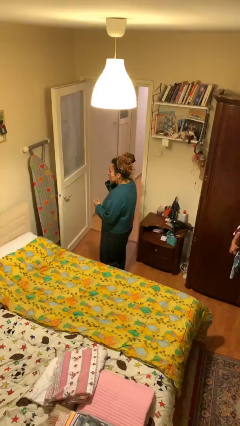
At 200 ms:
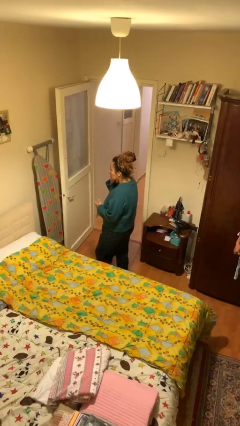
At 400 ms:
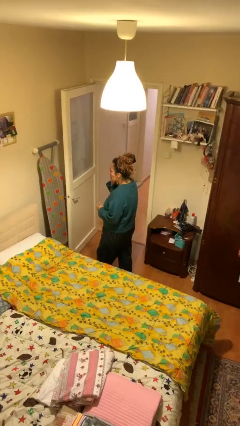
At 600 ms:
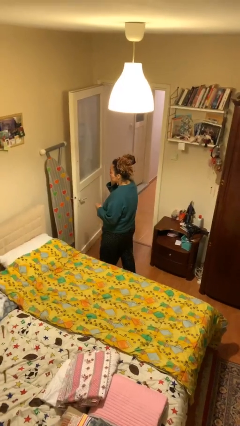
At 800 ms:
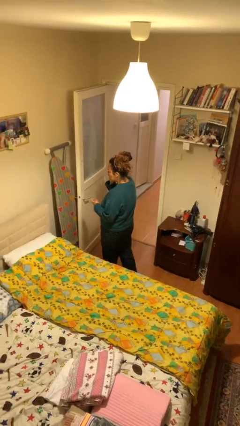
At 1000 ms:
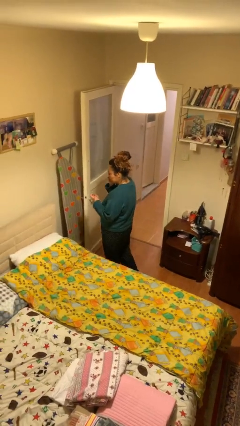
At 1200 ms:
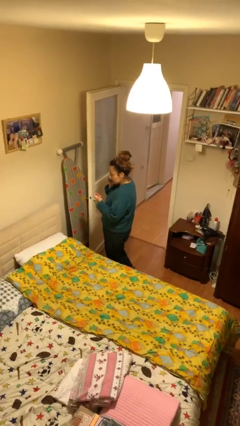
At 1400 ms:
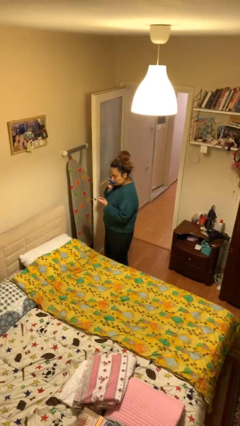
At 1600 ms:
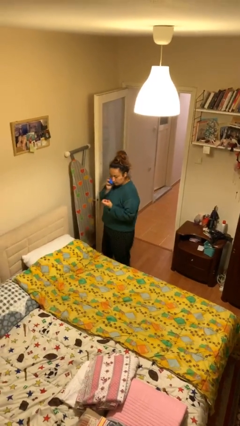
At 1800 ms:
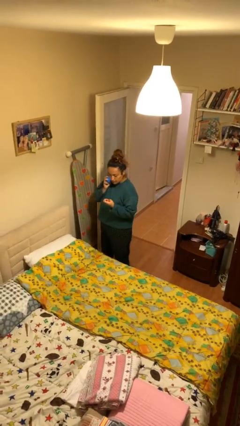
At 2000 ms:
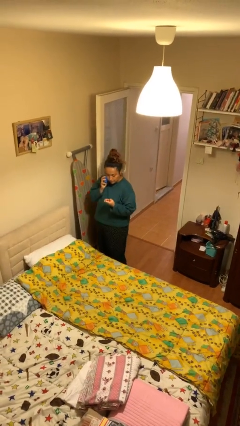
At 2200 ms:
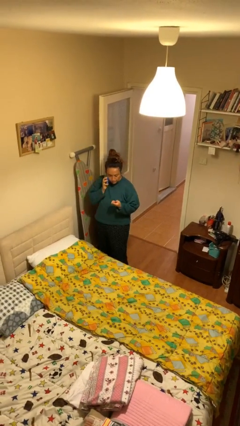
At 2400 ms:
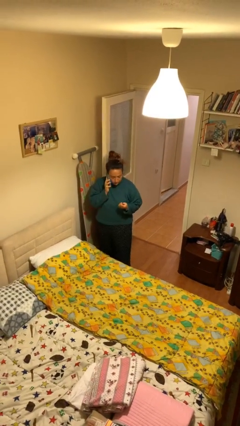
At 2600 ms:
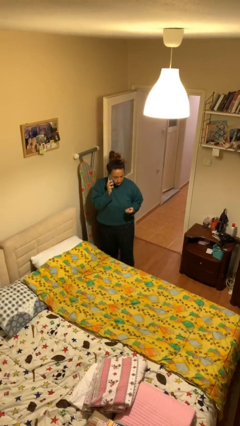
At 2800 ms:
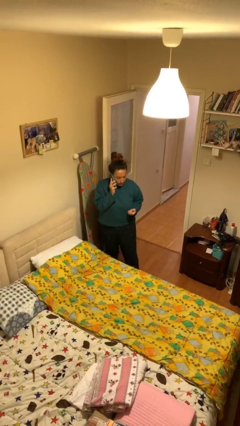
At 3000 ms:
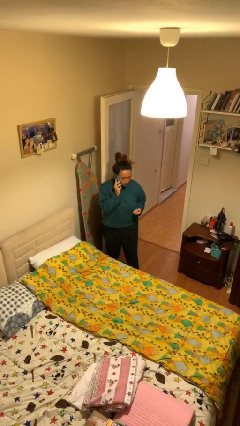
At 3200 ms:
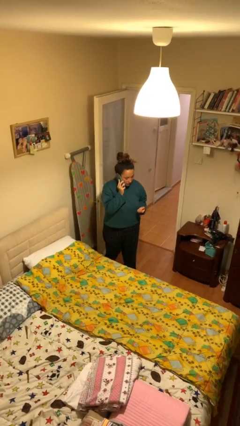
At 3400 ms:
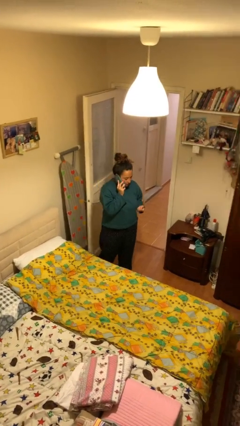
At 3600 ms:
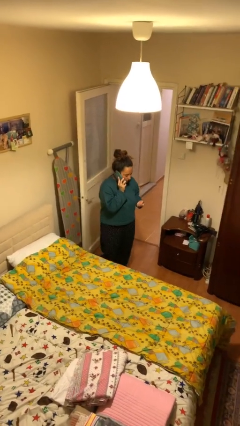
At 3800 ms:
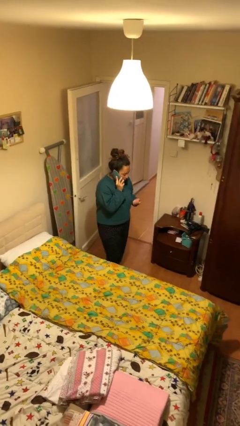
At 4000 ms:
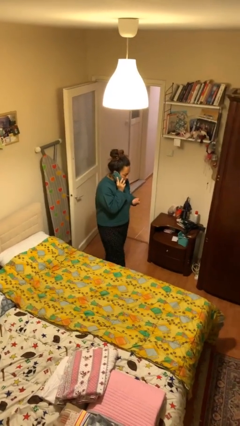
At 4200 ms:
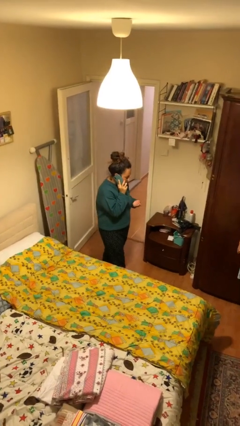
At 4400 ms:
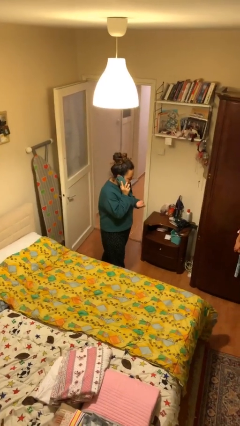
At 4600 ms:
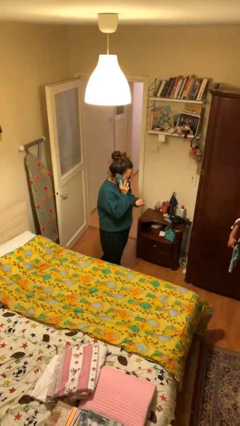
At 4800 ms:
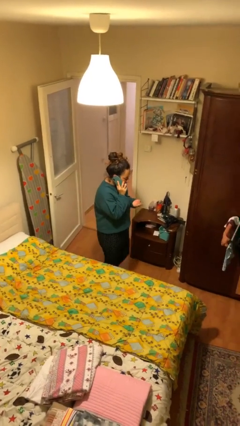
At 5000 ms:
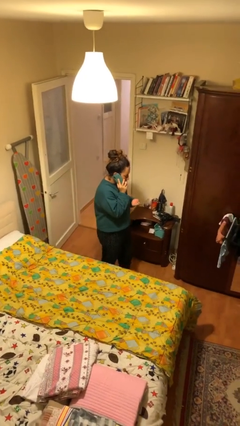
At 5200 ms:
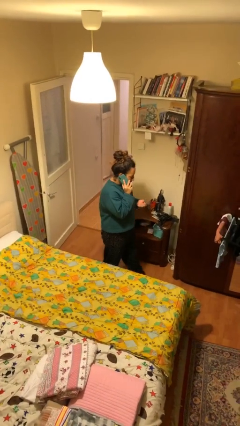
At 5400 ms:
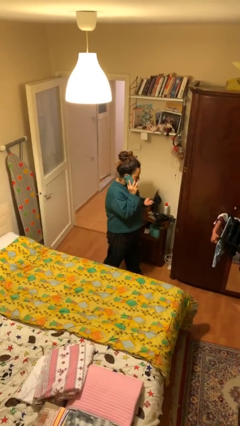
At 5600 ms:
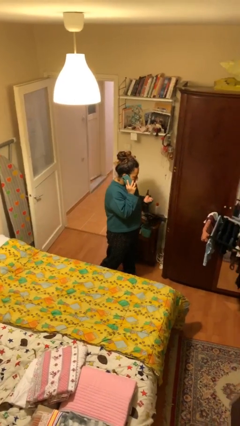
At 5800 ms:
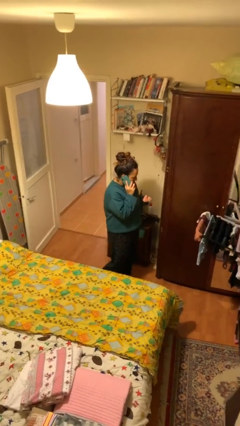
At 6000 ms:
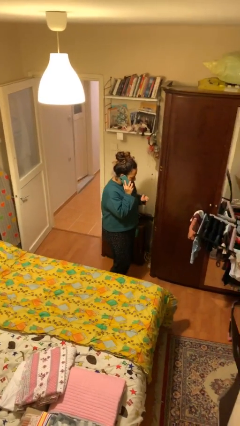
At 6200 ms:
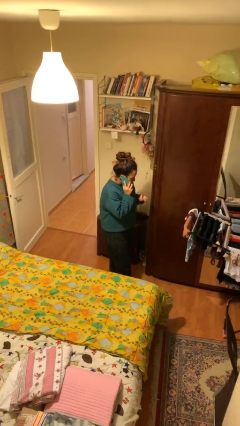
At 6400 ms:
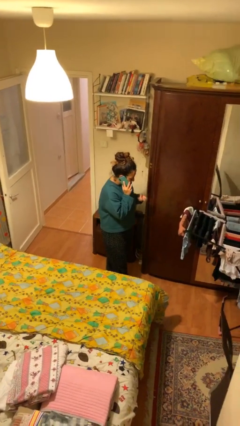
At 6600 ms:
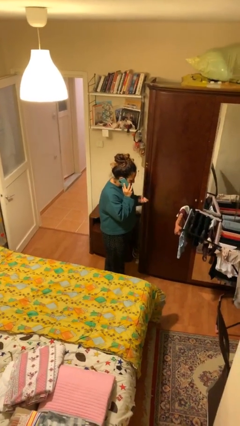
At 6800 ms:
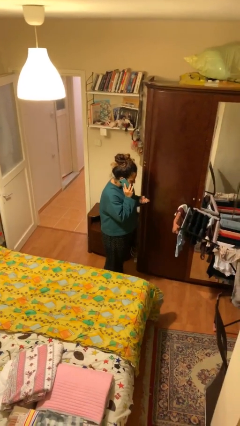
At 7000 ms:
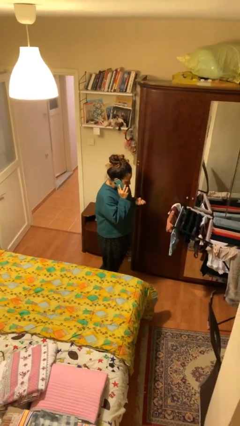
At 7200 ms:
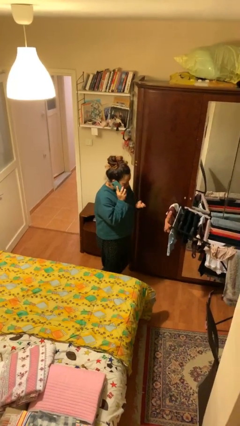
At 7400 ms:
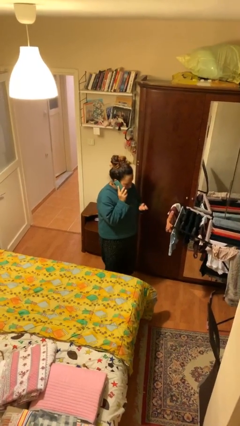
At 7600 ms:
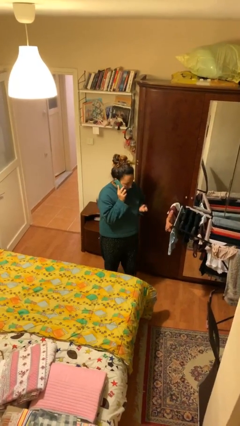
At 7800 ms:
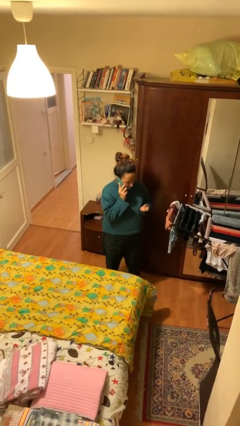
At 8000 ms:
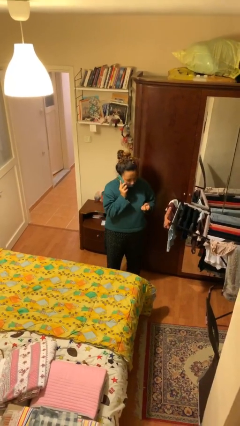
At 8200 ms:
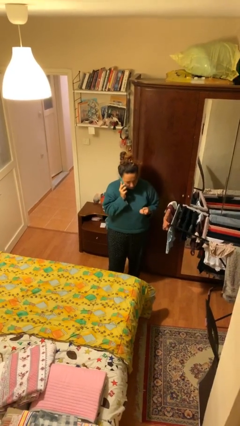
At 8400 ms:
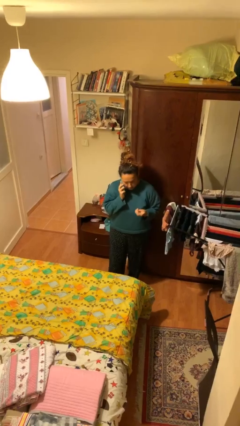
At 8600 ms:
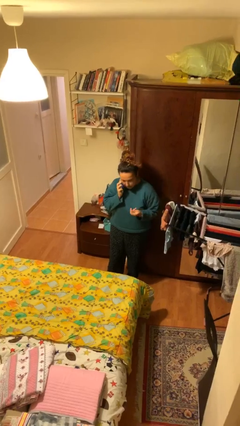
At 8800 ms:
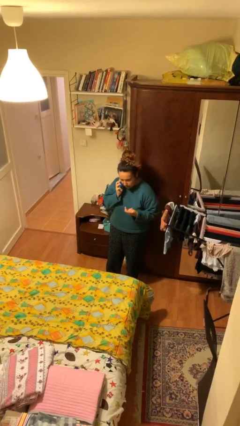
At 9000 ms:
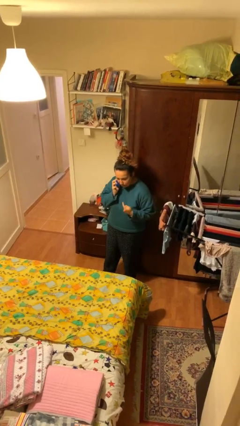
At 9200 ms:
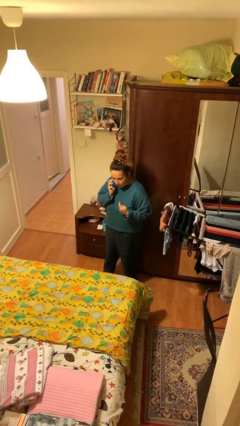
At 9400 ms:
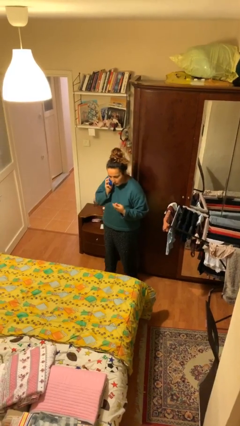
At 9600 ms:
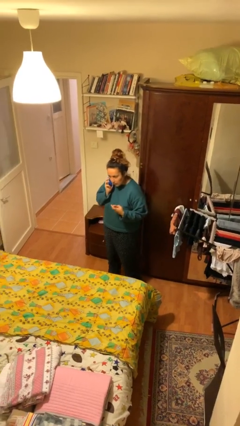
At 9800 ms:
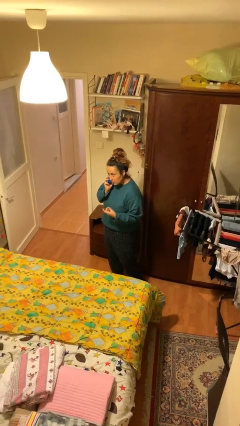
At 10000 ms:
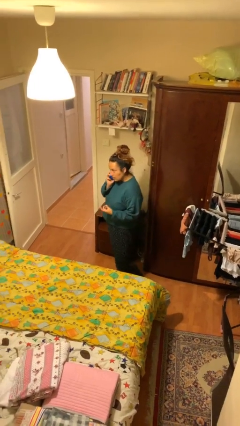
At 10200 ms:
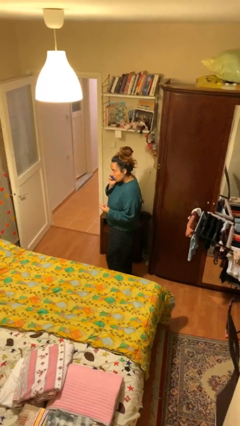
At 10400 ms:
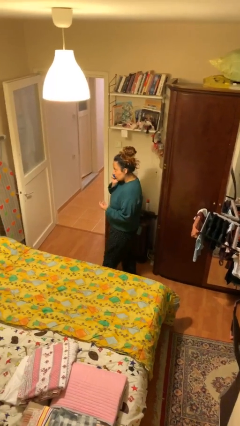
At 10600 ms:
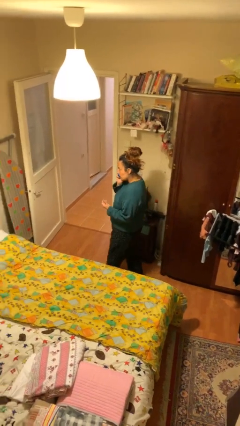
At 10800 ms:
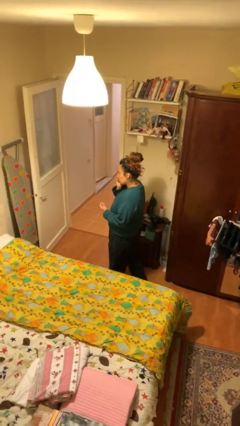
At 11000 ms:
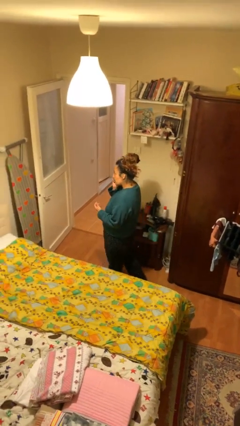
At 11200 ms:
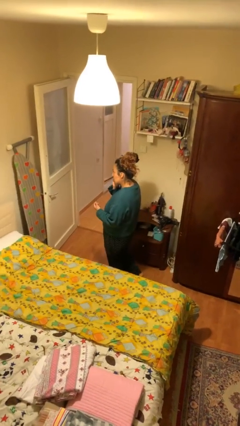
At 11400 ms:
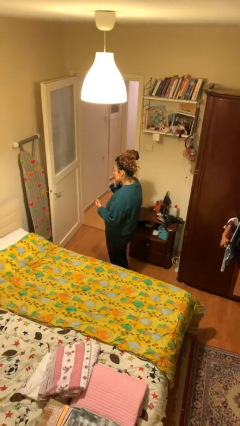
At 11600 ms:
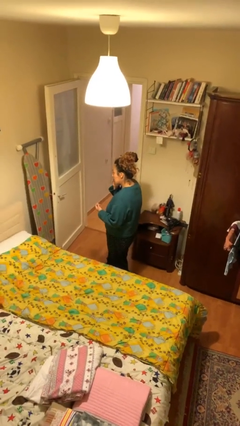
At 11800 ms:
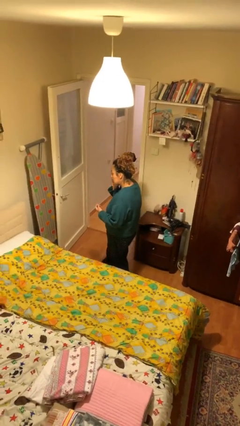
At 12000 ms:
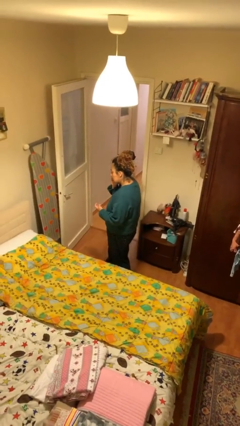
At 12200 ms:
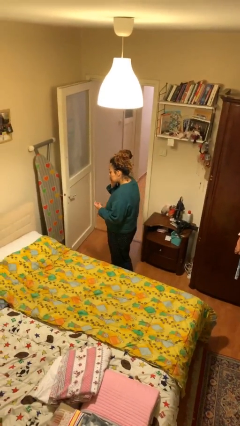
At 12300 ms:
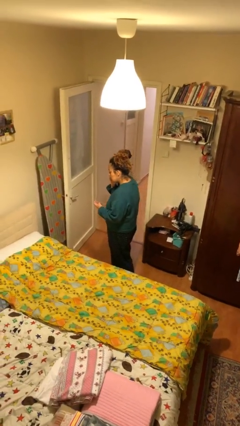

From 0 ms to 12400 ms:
person talks on phone

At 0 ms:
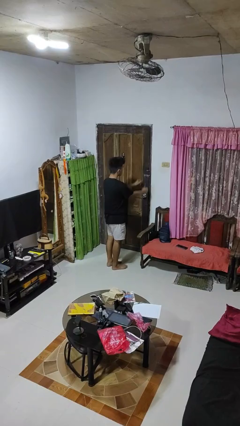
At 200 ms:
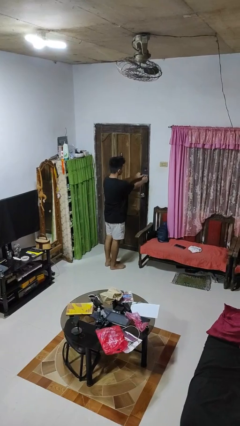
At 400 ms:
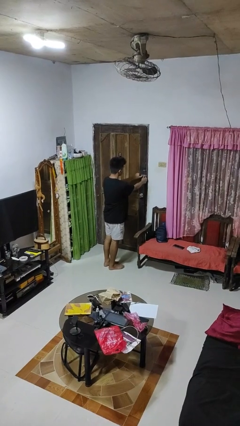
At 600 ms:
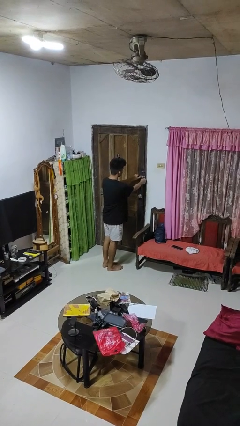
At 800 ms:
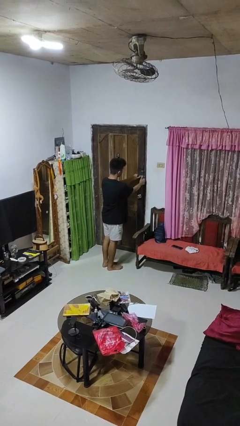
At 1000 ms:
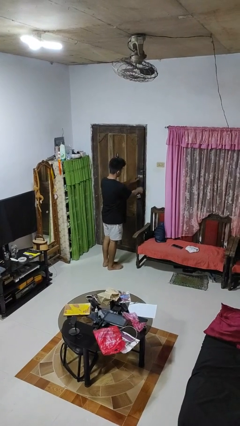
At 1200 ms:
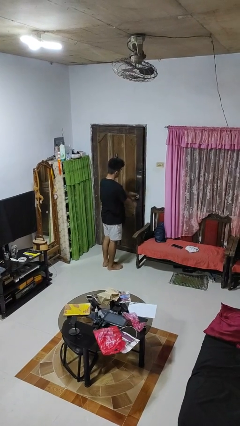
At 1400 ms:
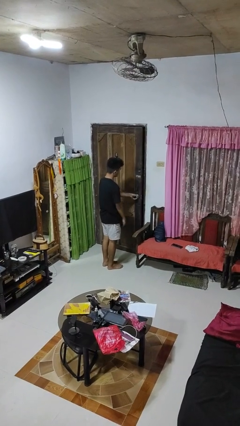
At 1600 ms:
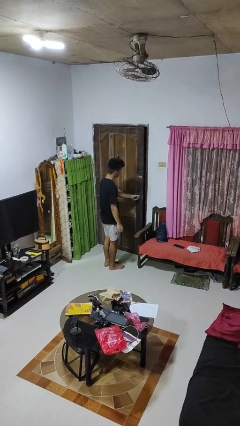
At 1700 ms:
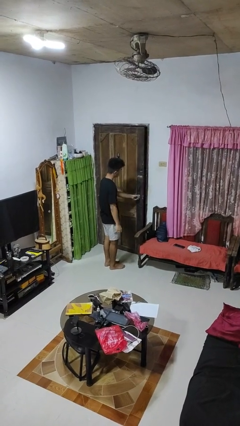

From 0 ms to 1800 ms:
person unlocks door with keys

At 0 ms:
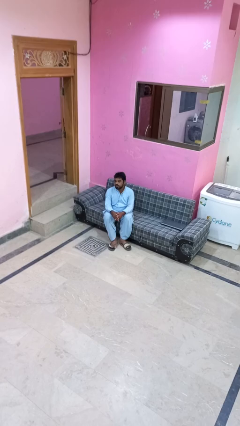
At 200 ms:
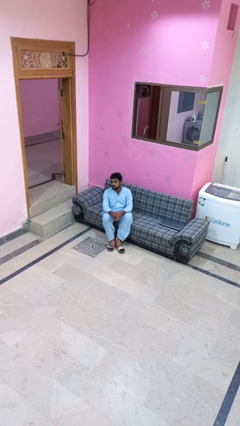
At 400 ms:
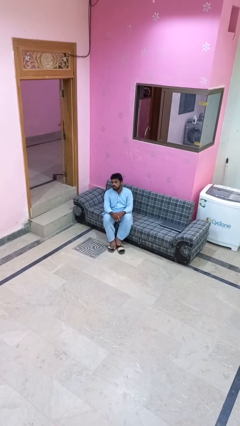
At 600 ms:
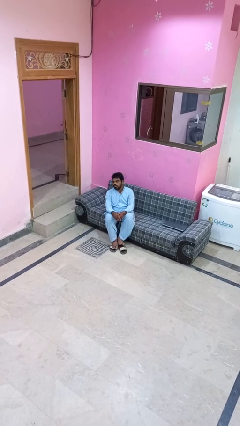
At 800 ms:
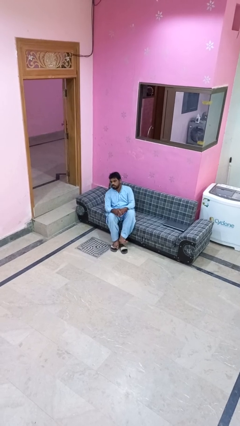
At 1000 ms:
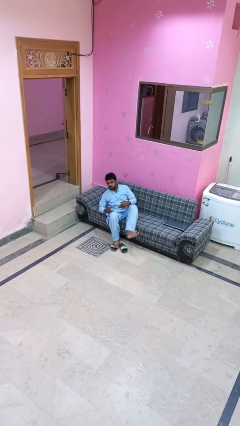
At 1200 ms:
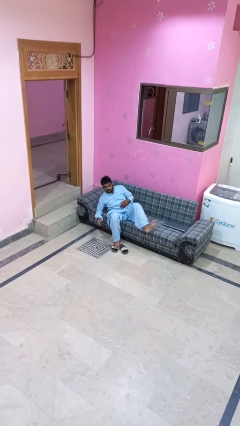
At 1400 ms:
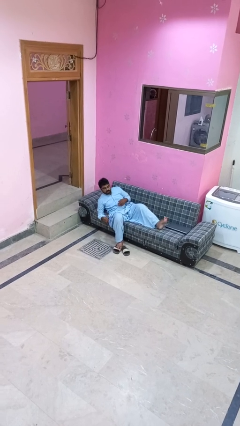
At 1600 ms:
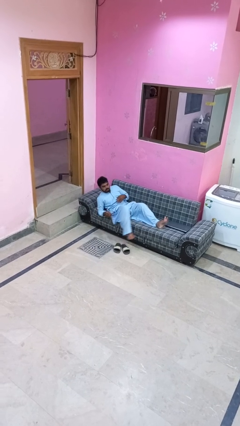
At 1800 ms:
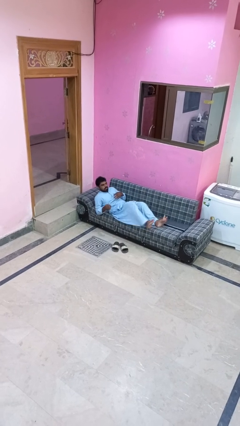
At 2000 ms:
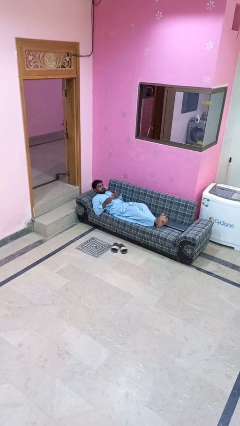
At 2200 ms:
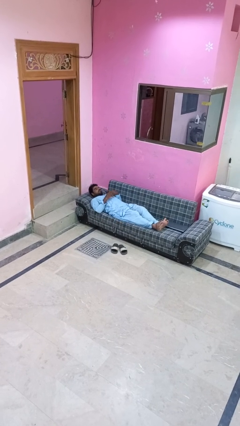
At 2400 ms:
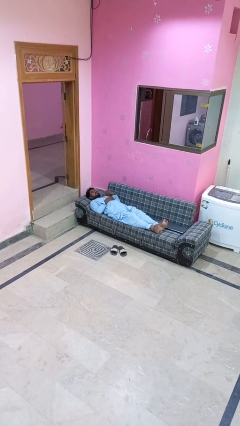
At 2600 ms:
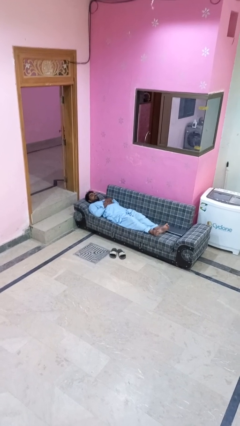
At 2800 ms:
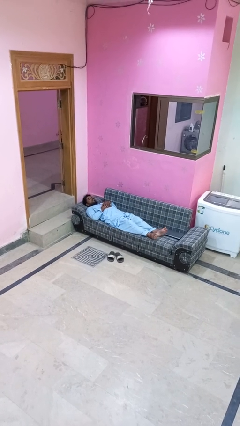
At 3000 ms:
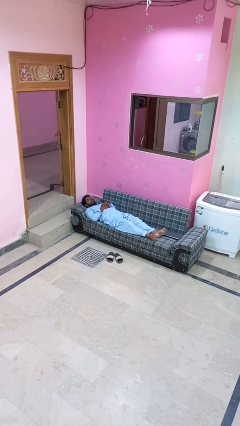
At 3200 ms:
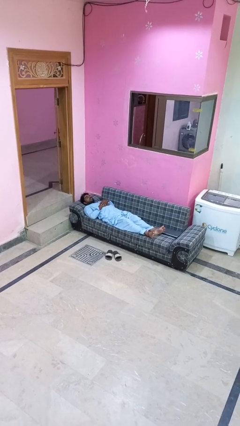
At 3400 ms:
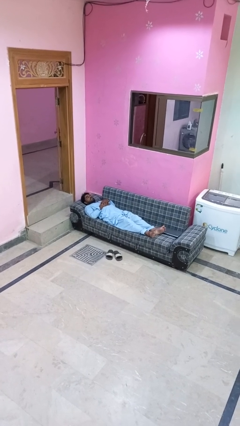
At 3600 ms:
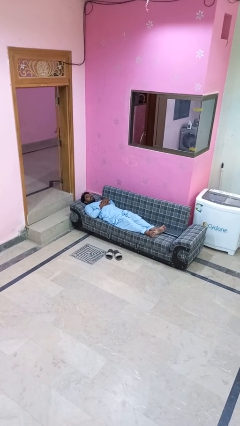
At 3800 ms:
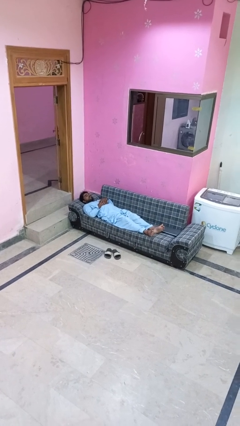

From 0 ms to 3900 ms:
person lies down on couch

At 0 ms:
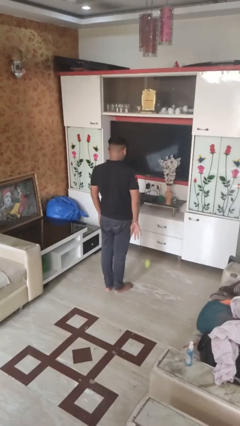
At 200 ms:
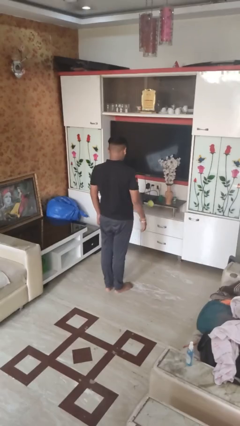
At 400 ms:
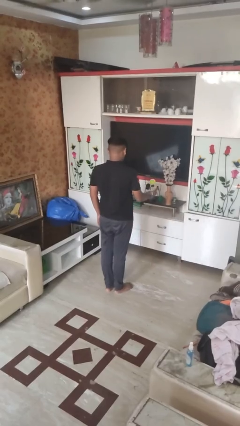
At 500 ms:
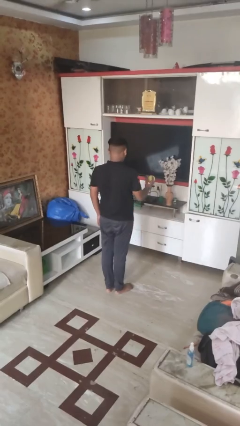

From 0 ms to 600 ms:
person bounces ball on floor
